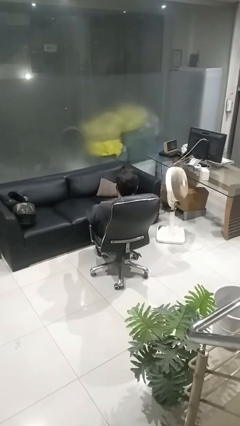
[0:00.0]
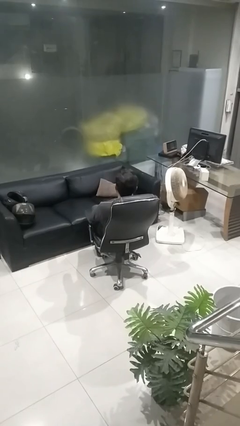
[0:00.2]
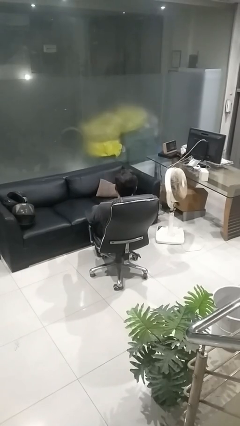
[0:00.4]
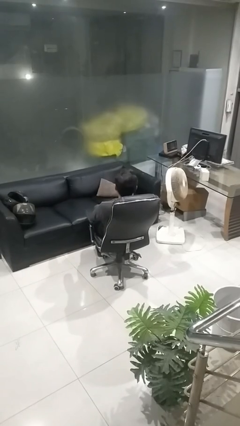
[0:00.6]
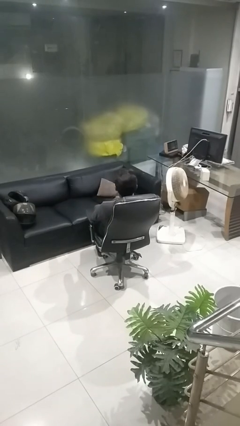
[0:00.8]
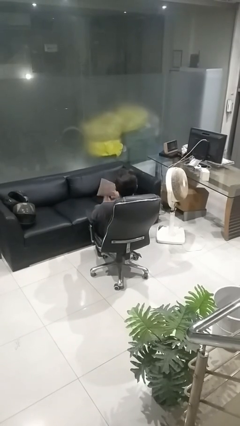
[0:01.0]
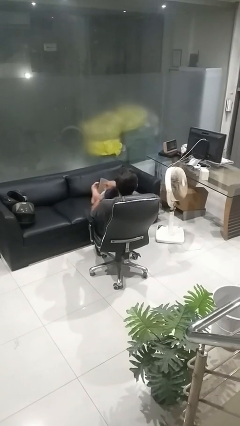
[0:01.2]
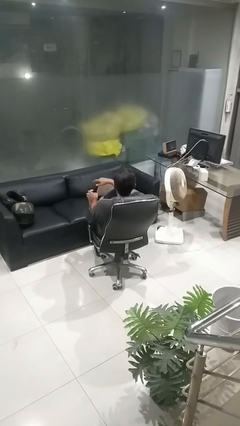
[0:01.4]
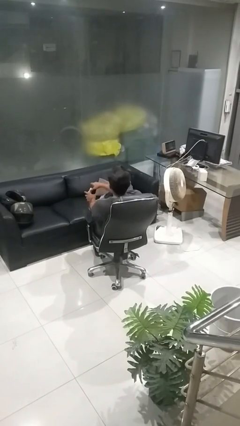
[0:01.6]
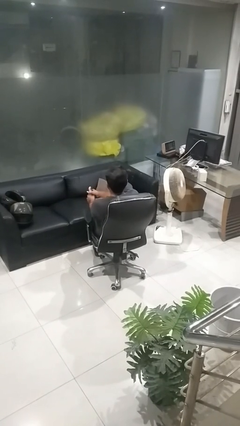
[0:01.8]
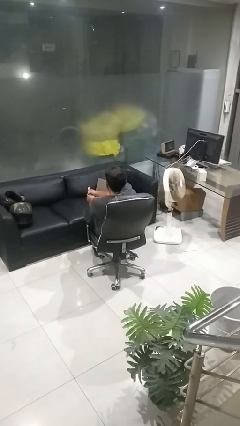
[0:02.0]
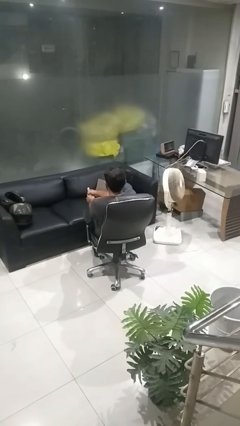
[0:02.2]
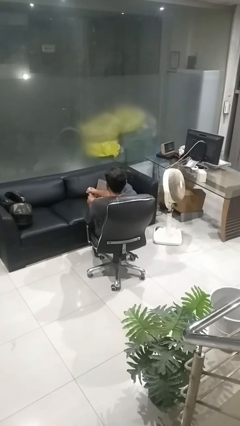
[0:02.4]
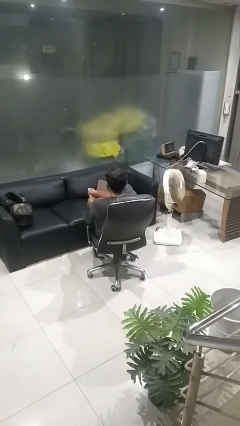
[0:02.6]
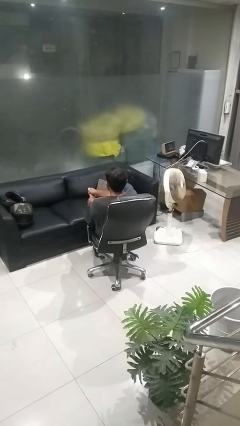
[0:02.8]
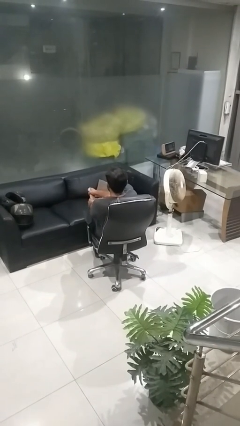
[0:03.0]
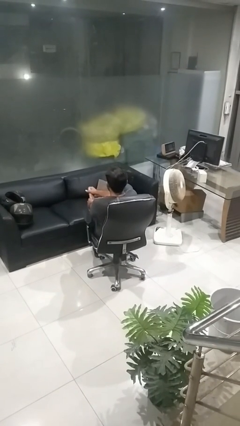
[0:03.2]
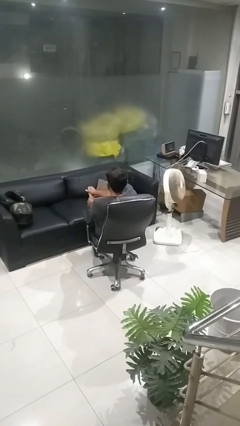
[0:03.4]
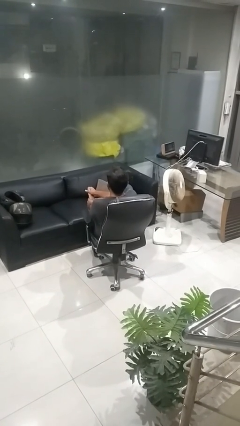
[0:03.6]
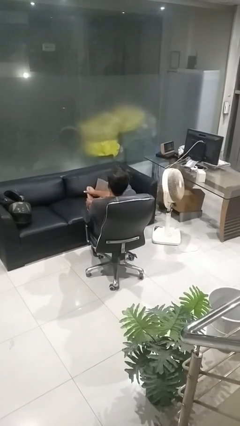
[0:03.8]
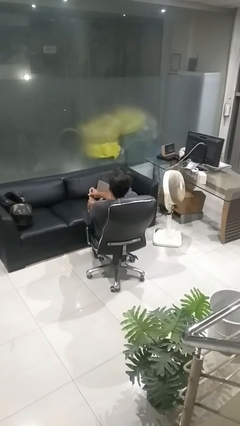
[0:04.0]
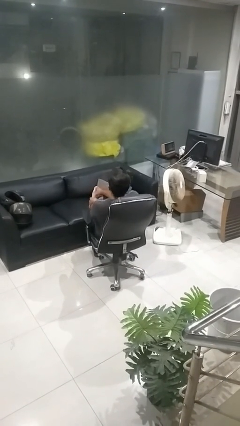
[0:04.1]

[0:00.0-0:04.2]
person rubs foot

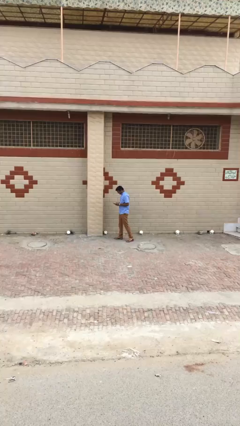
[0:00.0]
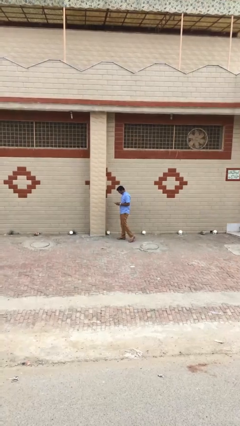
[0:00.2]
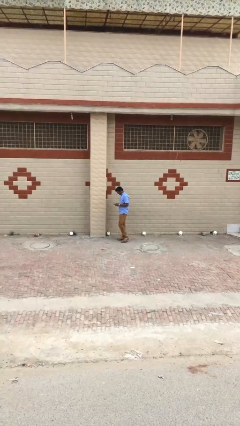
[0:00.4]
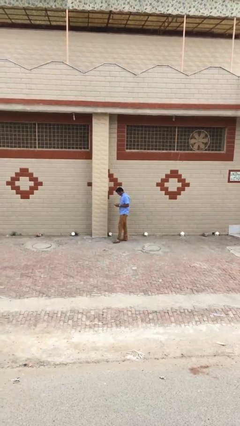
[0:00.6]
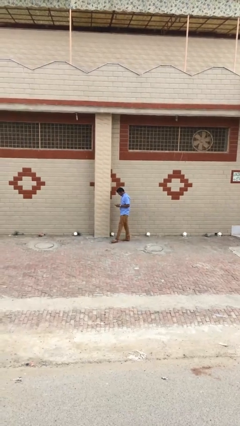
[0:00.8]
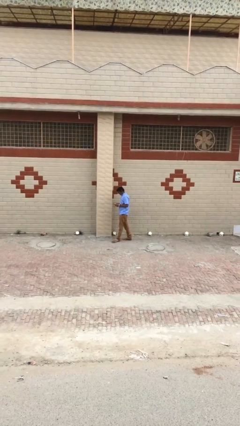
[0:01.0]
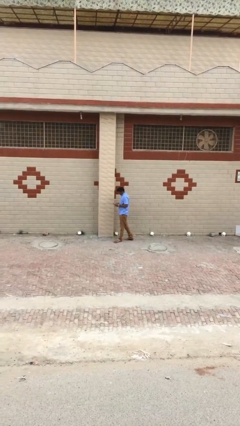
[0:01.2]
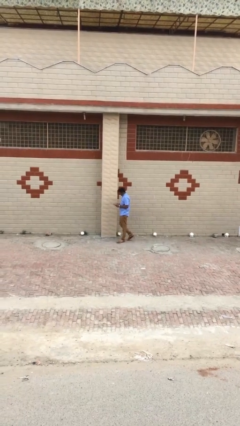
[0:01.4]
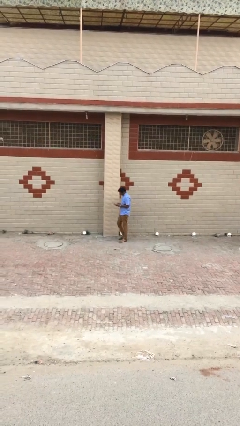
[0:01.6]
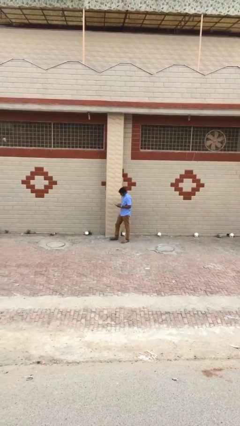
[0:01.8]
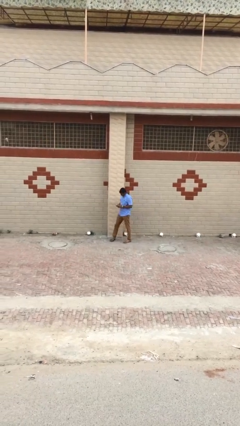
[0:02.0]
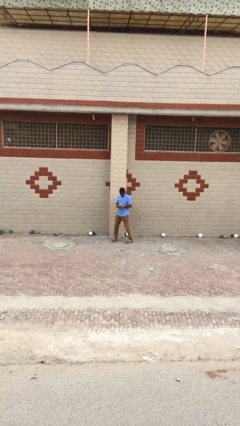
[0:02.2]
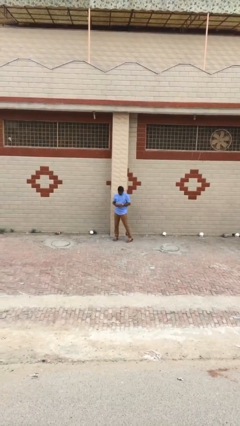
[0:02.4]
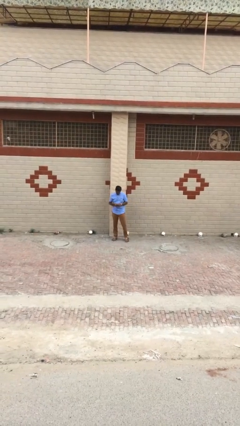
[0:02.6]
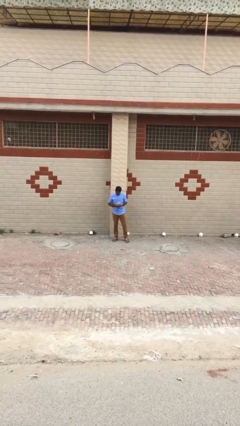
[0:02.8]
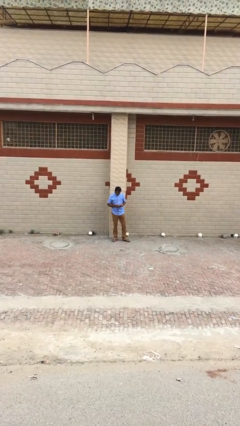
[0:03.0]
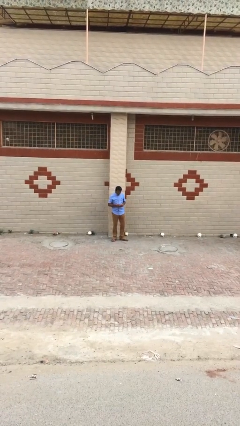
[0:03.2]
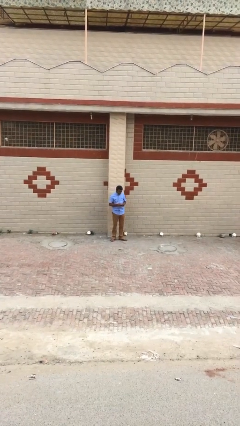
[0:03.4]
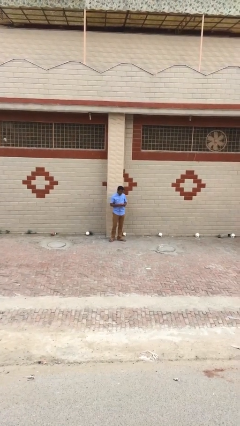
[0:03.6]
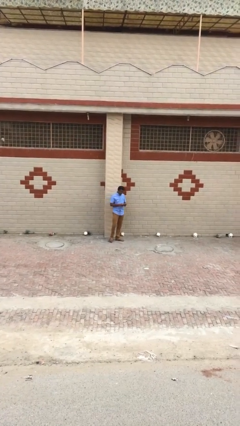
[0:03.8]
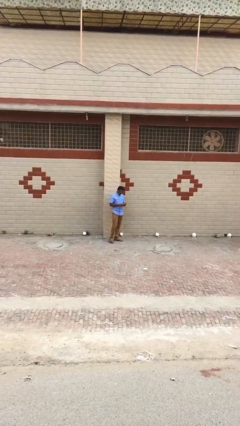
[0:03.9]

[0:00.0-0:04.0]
person texts on phone

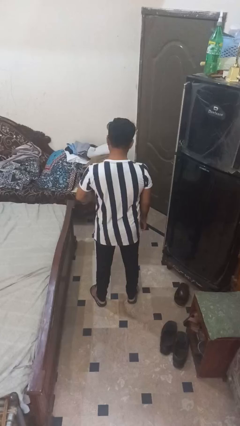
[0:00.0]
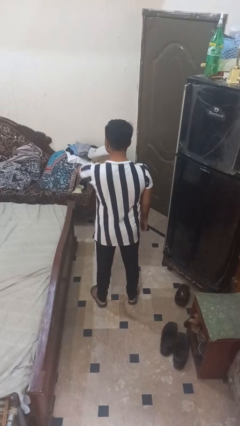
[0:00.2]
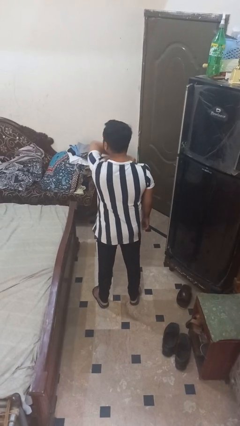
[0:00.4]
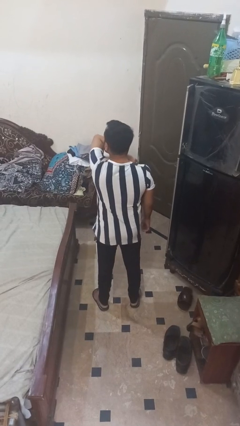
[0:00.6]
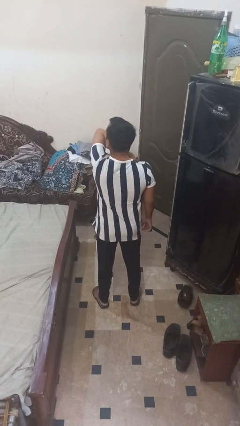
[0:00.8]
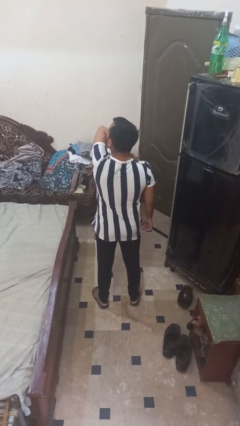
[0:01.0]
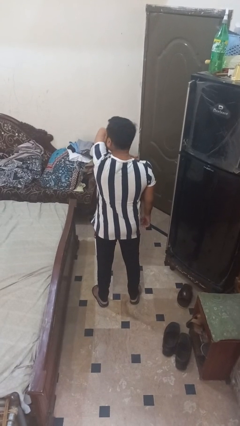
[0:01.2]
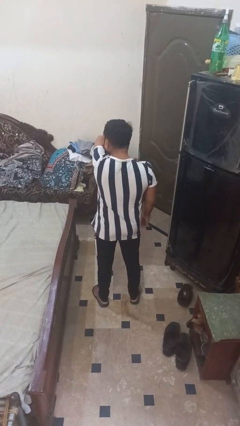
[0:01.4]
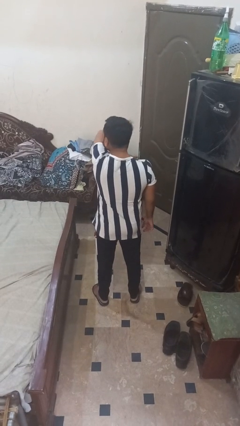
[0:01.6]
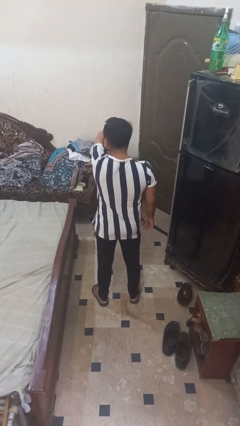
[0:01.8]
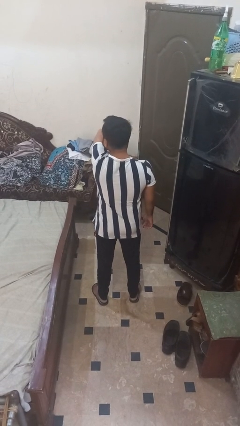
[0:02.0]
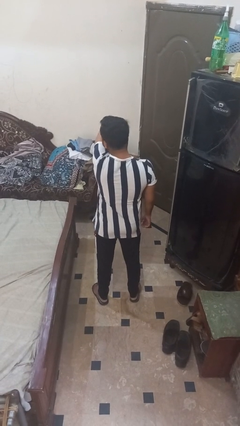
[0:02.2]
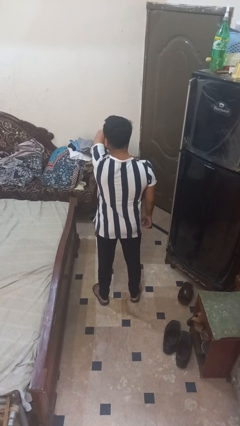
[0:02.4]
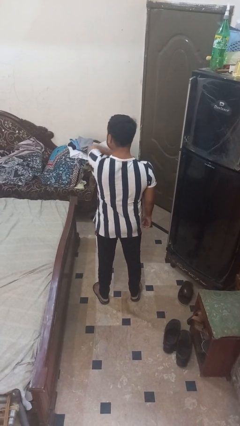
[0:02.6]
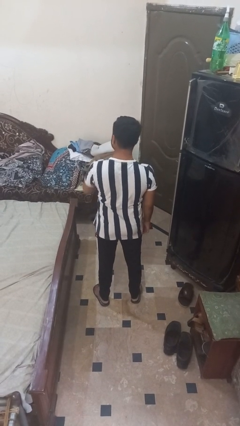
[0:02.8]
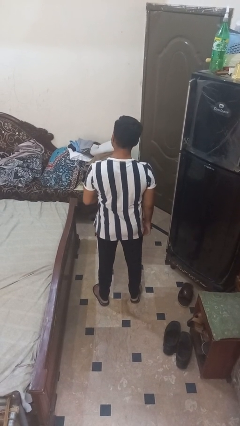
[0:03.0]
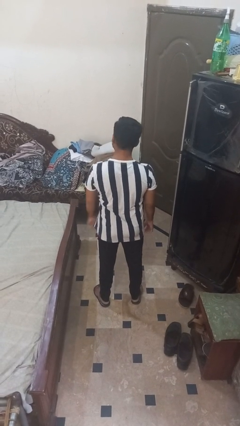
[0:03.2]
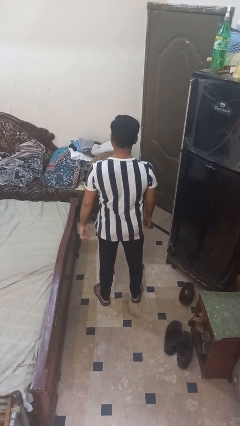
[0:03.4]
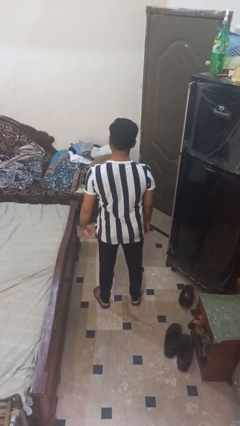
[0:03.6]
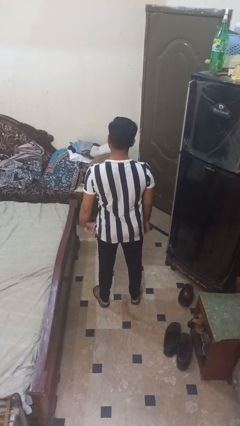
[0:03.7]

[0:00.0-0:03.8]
person sneezes into arm

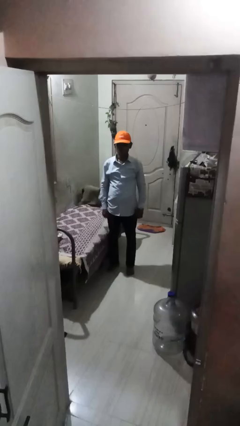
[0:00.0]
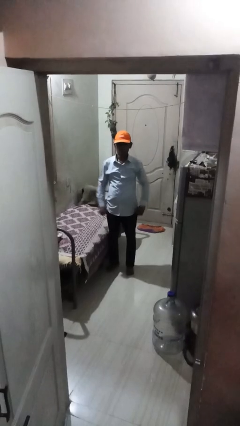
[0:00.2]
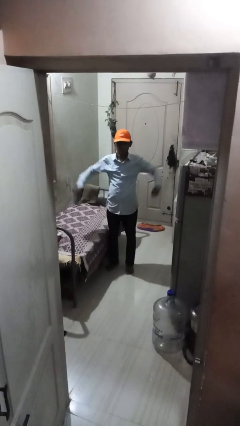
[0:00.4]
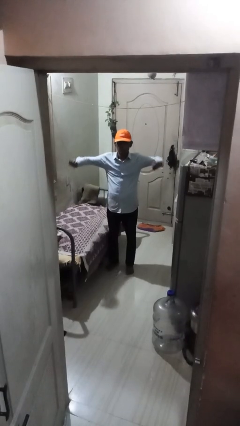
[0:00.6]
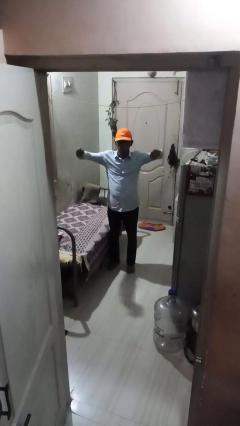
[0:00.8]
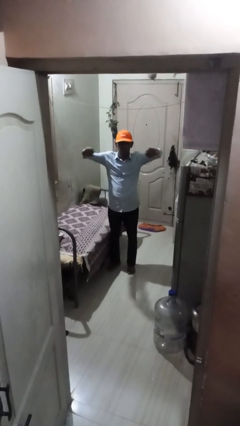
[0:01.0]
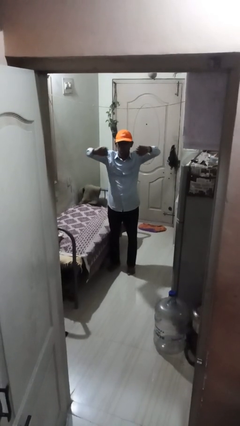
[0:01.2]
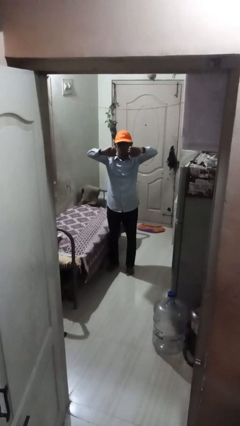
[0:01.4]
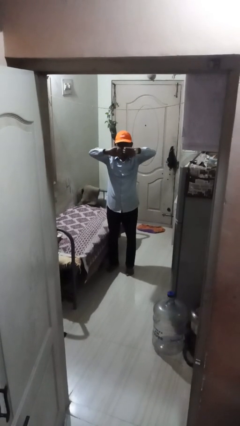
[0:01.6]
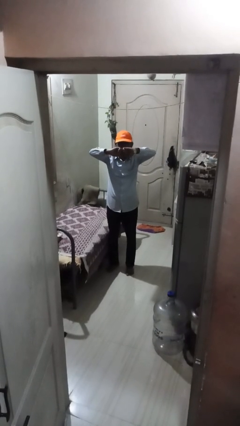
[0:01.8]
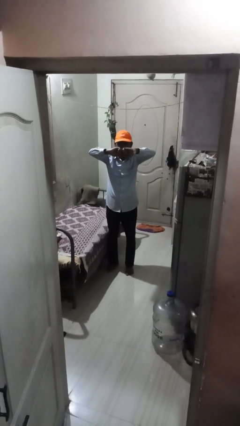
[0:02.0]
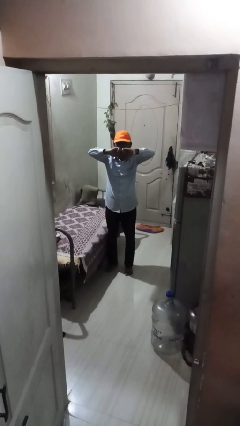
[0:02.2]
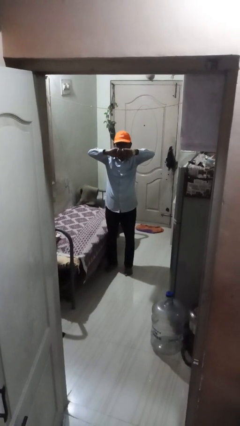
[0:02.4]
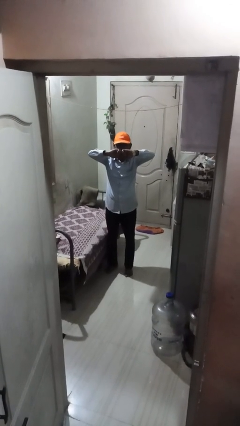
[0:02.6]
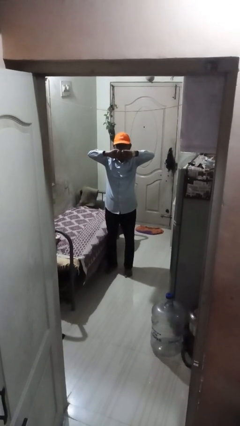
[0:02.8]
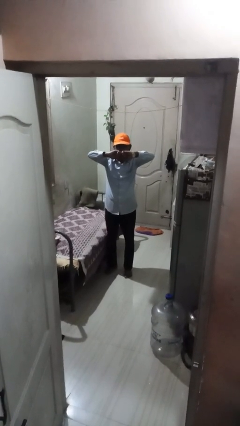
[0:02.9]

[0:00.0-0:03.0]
person gestures zoom in

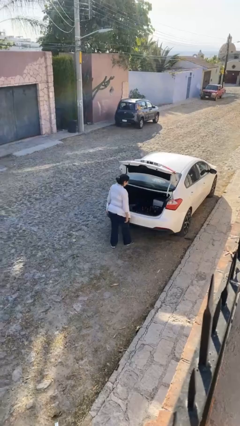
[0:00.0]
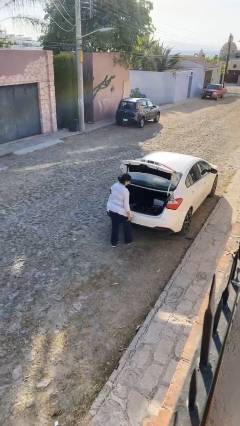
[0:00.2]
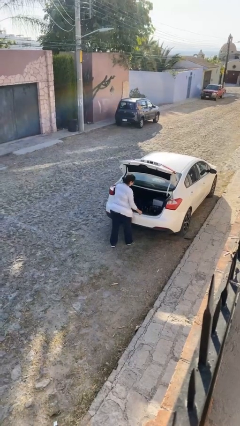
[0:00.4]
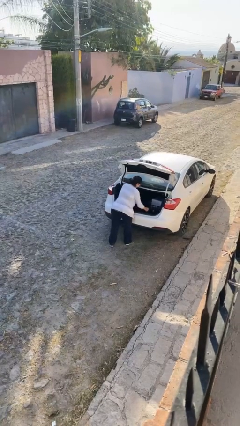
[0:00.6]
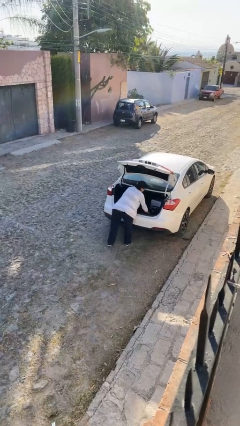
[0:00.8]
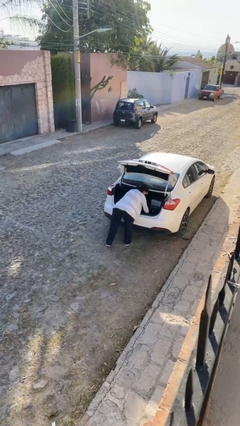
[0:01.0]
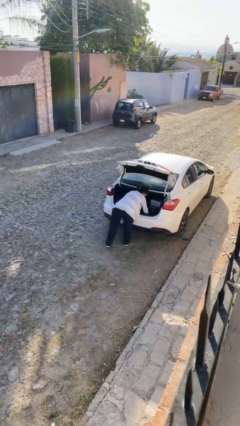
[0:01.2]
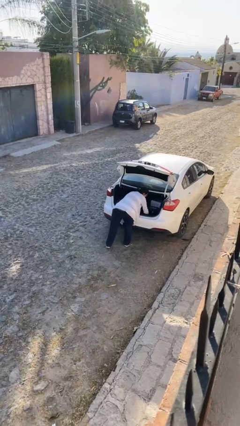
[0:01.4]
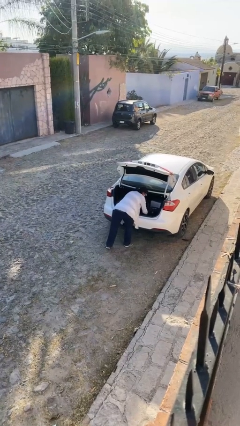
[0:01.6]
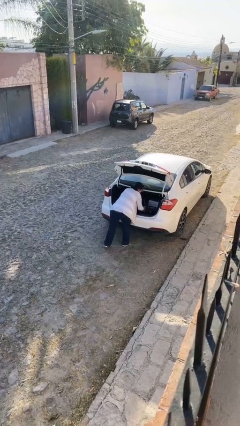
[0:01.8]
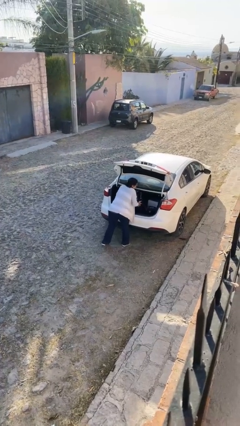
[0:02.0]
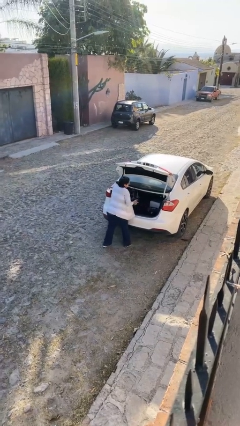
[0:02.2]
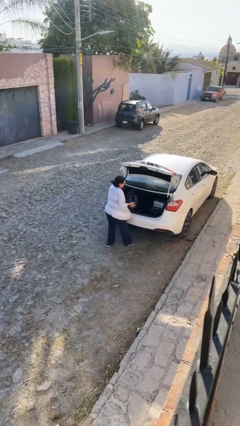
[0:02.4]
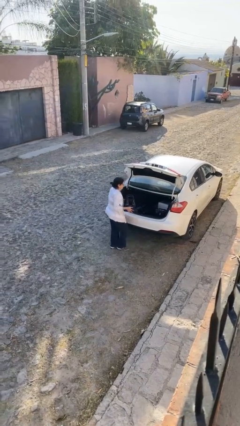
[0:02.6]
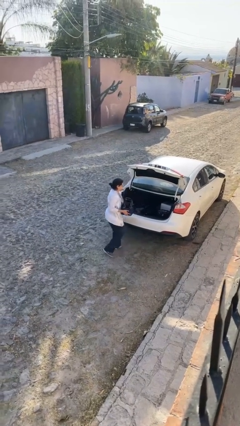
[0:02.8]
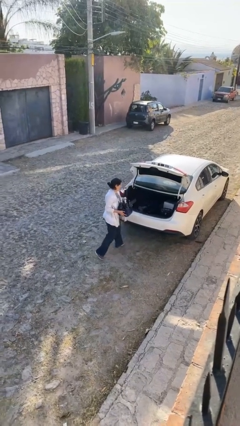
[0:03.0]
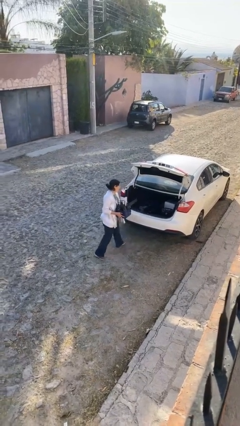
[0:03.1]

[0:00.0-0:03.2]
person unloads car
